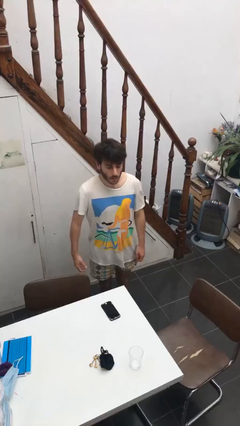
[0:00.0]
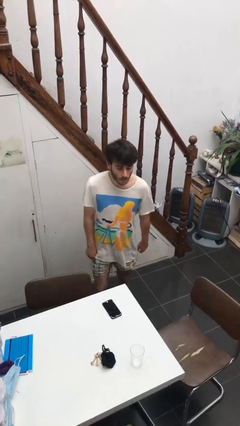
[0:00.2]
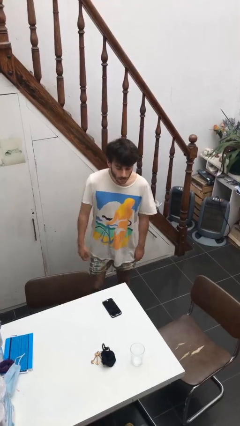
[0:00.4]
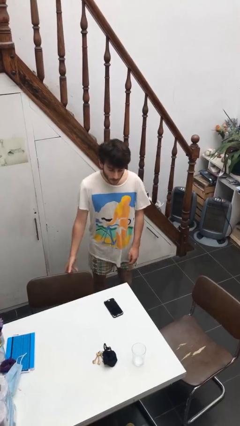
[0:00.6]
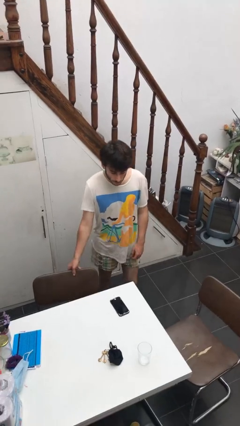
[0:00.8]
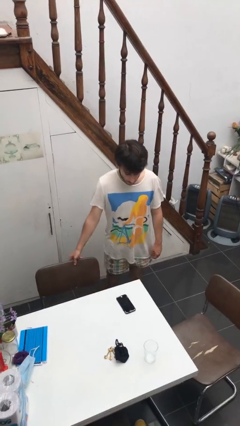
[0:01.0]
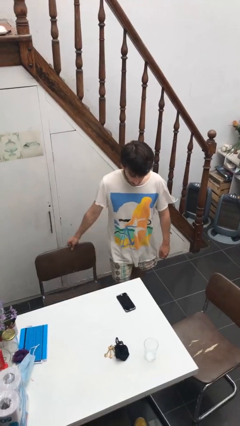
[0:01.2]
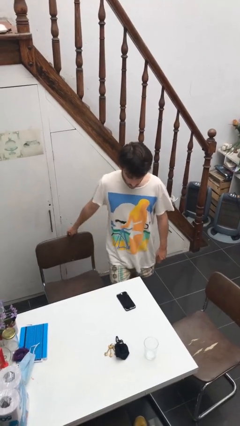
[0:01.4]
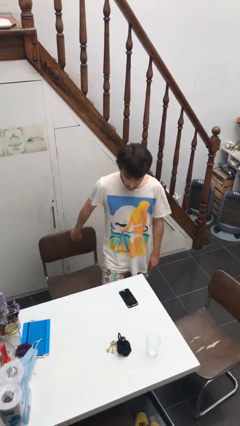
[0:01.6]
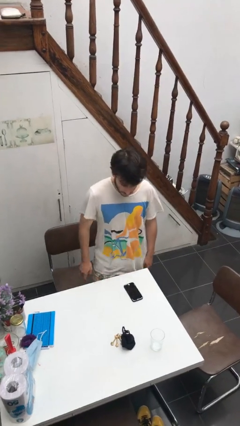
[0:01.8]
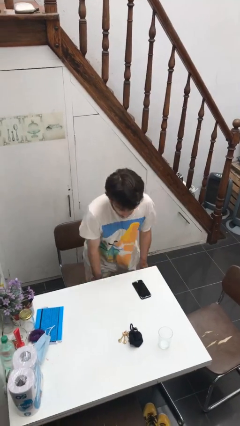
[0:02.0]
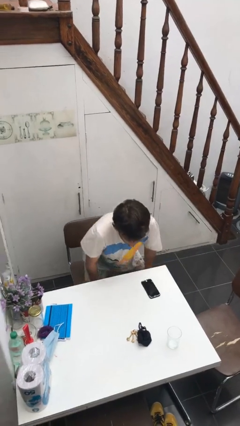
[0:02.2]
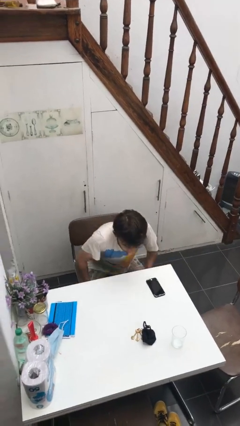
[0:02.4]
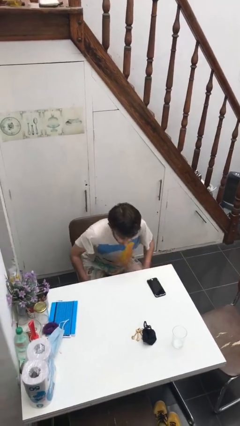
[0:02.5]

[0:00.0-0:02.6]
person sits down

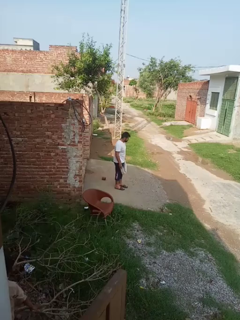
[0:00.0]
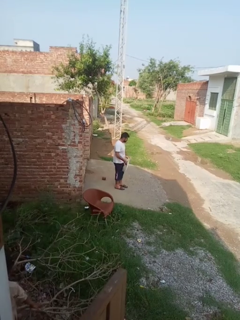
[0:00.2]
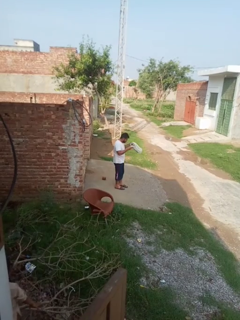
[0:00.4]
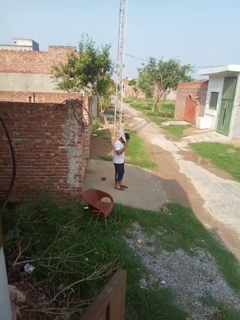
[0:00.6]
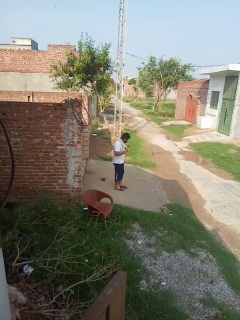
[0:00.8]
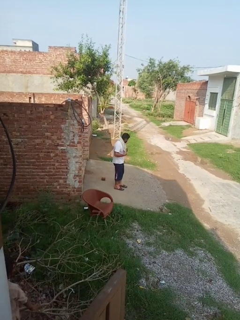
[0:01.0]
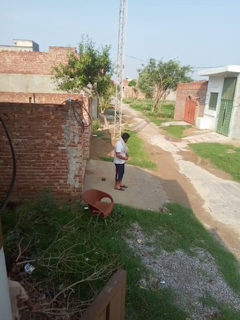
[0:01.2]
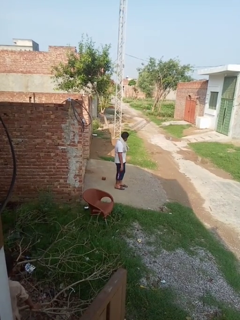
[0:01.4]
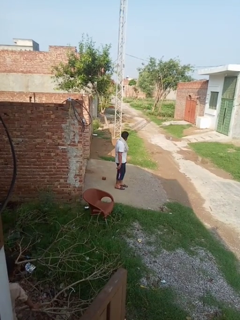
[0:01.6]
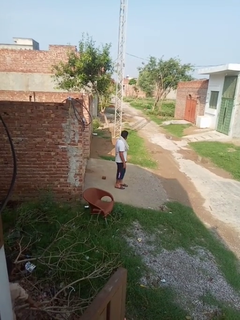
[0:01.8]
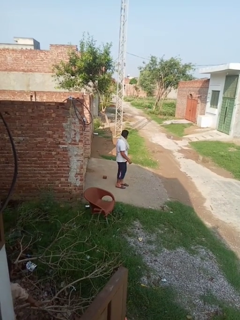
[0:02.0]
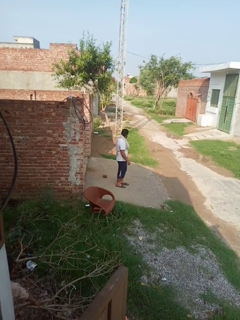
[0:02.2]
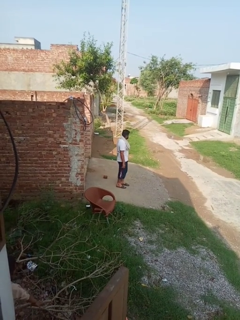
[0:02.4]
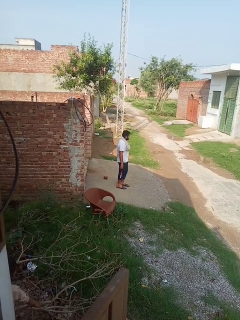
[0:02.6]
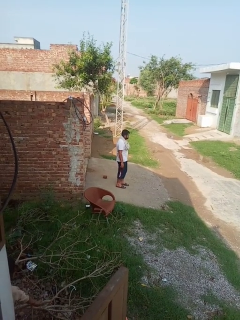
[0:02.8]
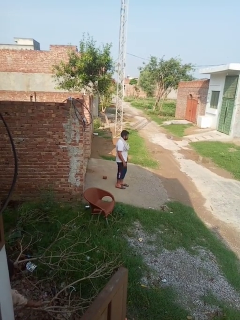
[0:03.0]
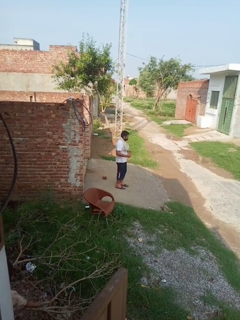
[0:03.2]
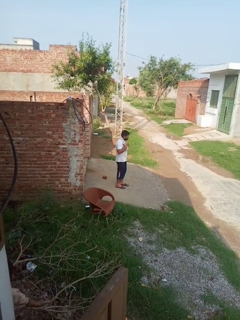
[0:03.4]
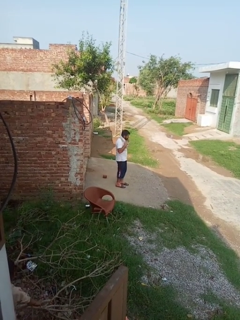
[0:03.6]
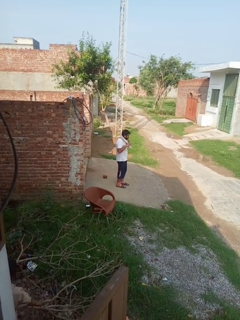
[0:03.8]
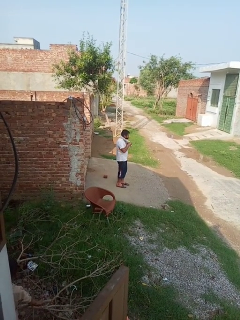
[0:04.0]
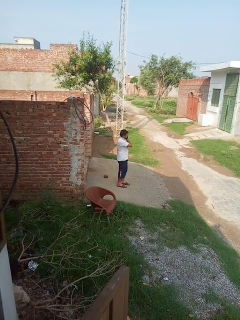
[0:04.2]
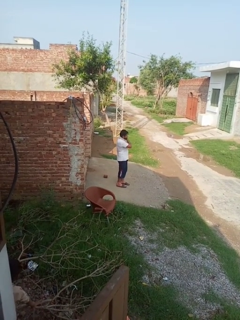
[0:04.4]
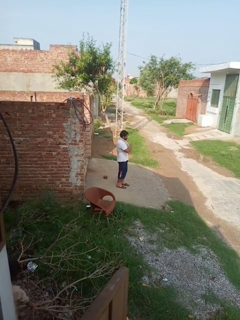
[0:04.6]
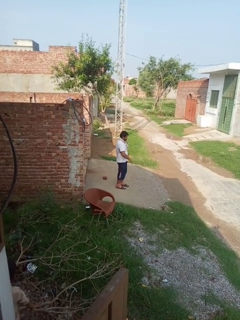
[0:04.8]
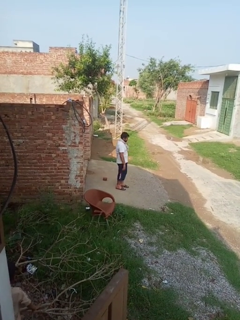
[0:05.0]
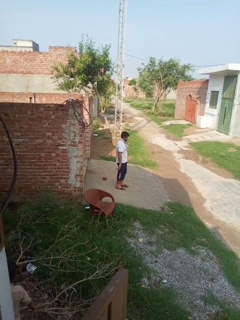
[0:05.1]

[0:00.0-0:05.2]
person puts on scarf

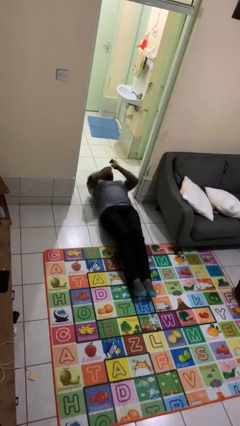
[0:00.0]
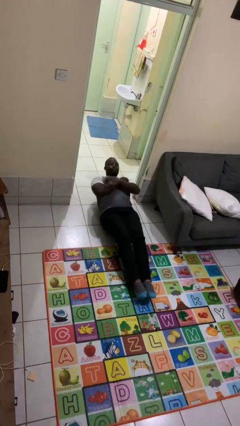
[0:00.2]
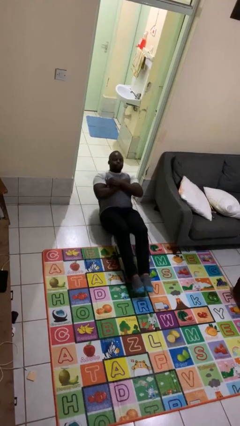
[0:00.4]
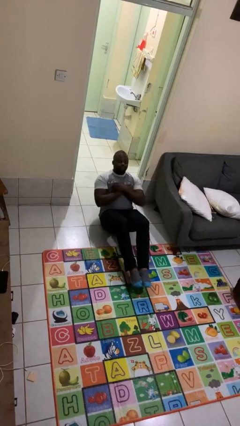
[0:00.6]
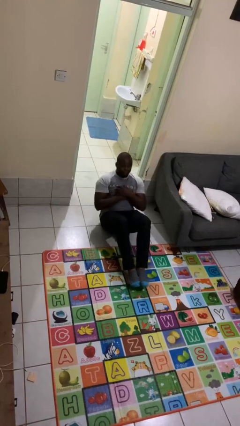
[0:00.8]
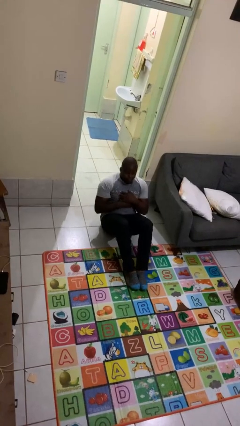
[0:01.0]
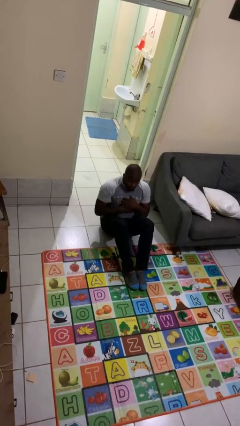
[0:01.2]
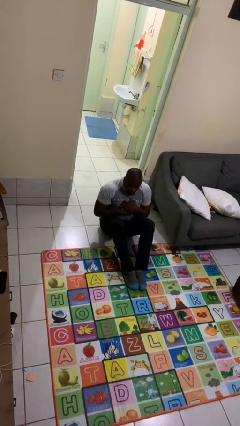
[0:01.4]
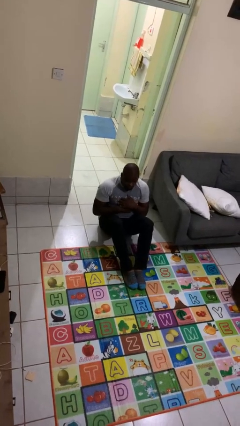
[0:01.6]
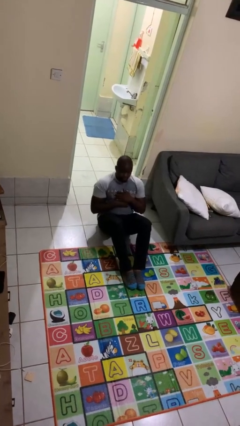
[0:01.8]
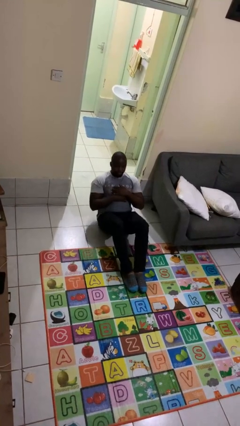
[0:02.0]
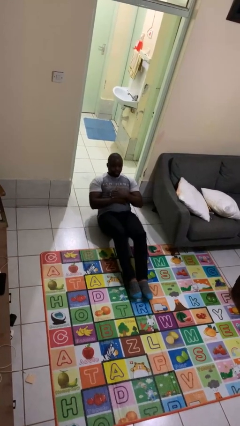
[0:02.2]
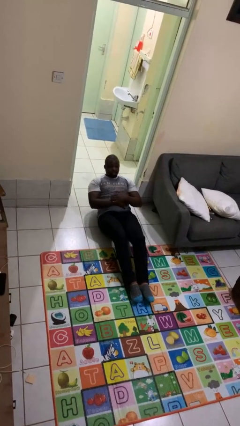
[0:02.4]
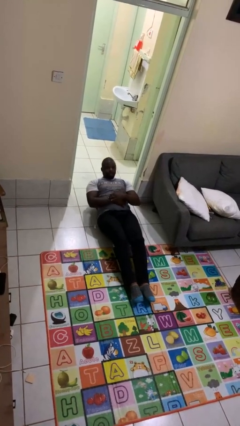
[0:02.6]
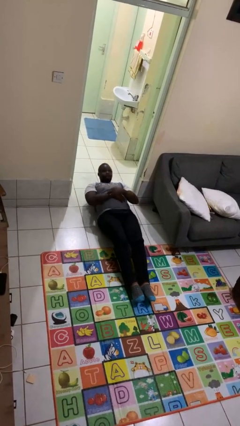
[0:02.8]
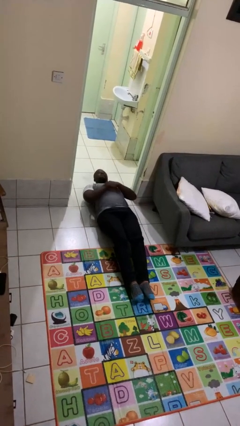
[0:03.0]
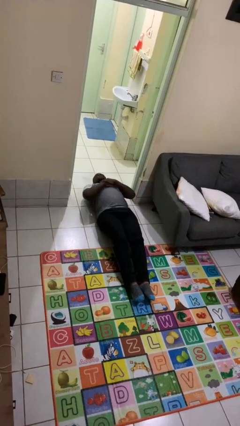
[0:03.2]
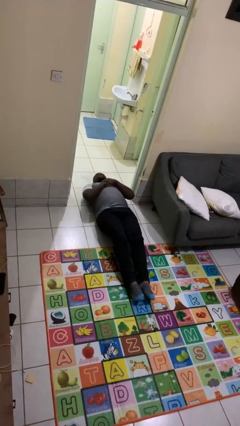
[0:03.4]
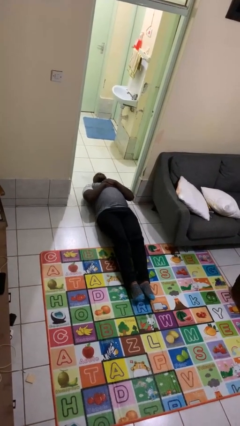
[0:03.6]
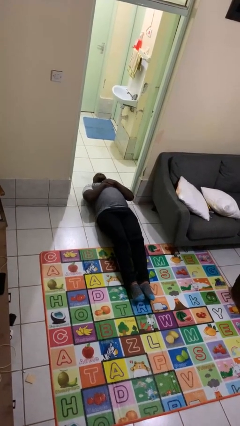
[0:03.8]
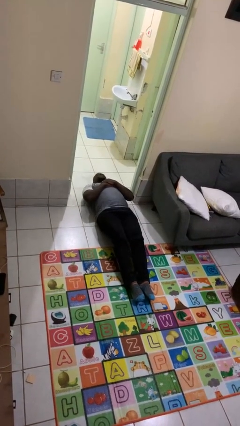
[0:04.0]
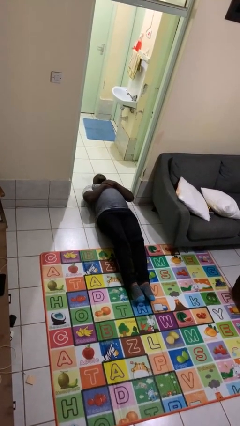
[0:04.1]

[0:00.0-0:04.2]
person exercises with situp

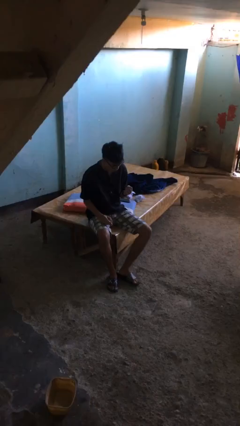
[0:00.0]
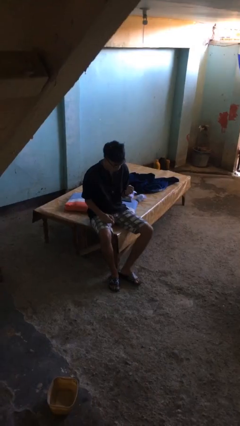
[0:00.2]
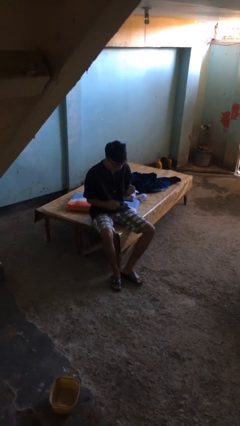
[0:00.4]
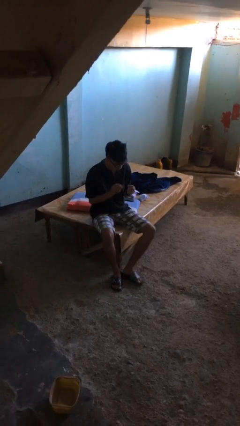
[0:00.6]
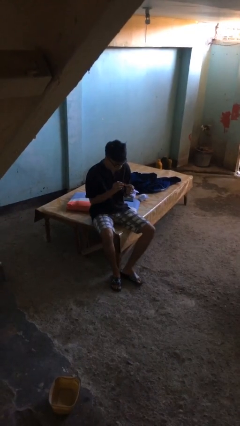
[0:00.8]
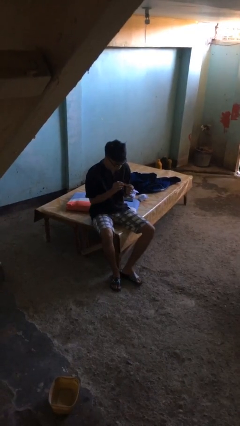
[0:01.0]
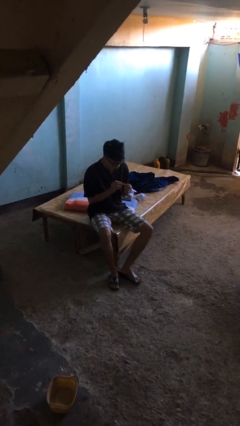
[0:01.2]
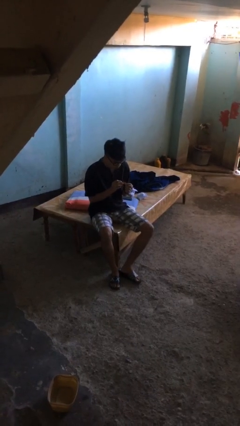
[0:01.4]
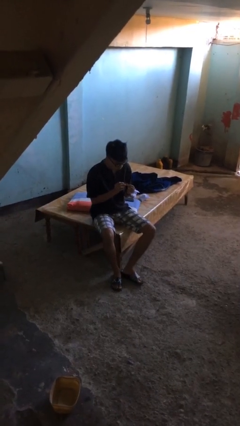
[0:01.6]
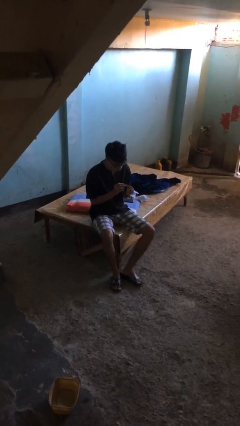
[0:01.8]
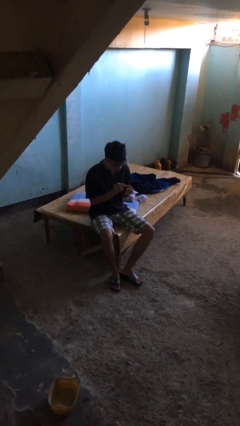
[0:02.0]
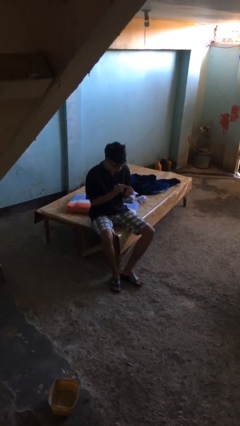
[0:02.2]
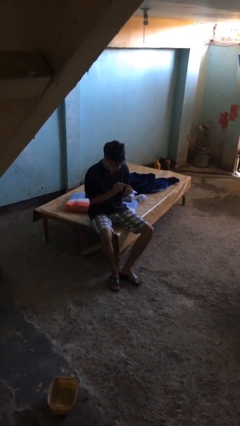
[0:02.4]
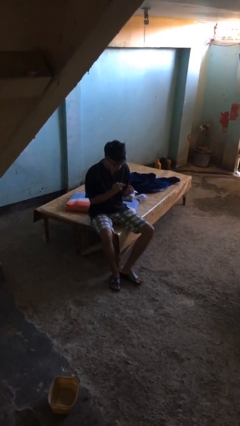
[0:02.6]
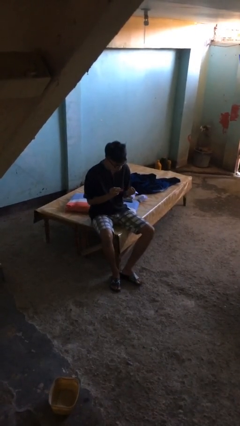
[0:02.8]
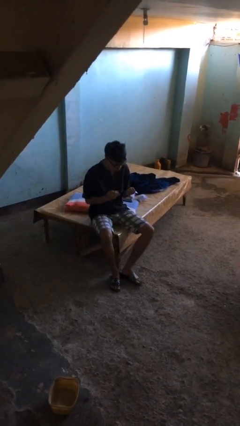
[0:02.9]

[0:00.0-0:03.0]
person clips fingernails

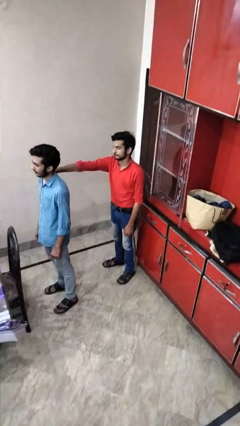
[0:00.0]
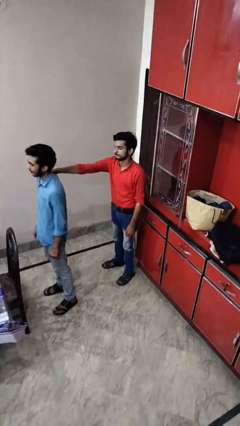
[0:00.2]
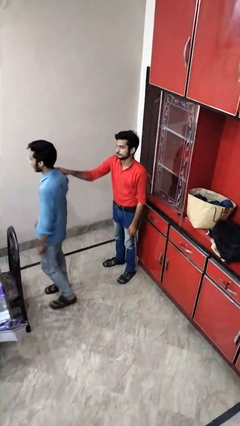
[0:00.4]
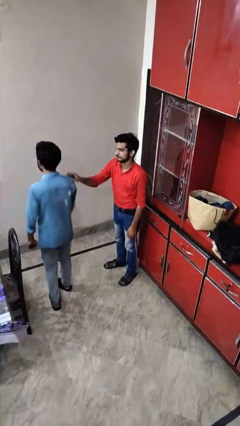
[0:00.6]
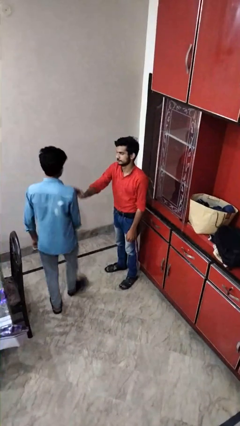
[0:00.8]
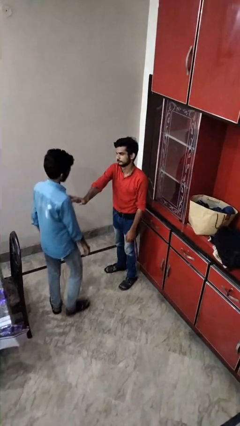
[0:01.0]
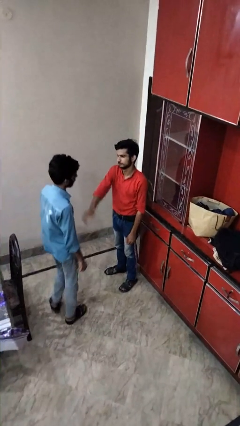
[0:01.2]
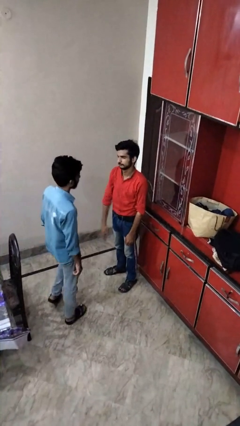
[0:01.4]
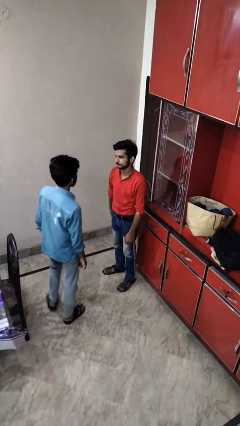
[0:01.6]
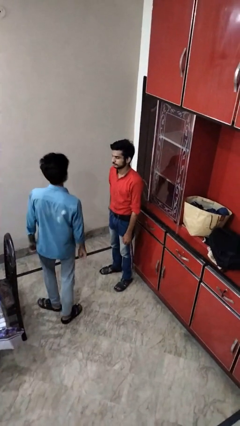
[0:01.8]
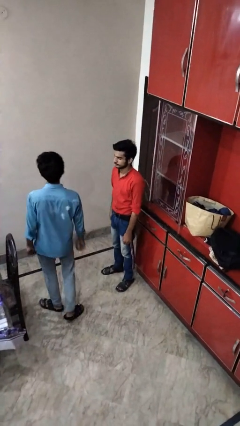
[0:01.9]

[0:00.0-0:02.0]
person spins person around

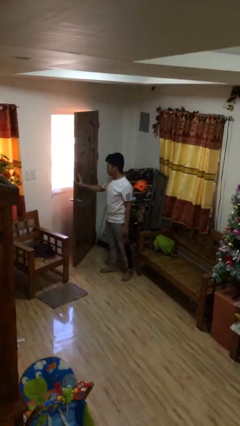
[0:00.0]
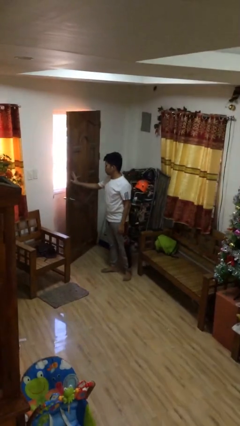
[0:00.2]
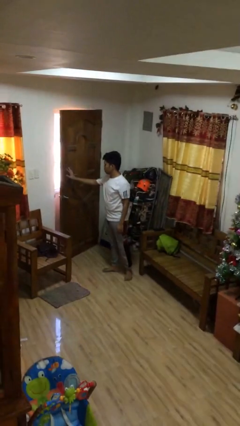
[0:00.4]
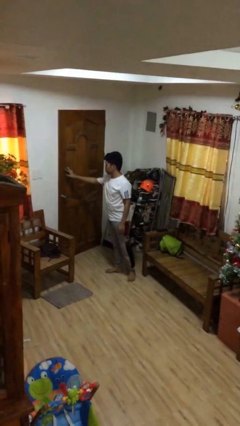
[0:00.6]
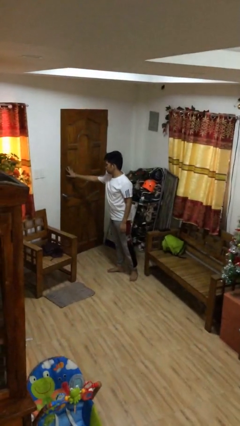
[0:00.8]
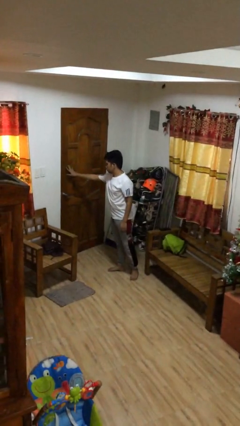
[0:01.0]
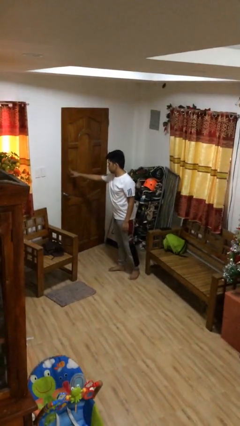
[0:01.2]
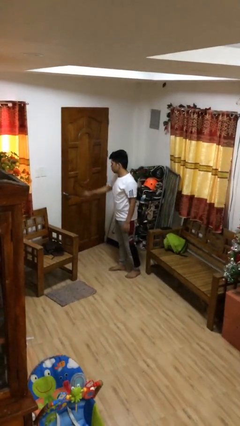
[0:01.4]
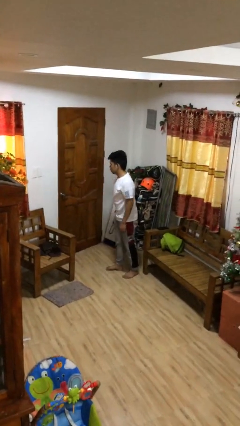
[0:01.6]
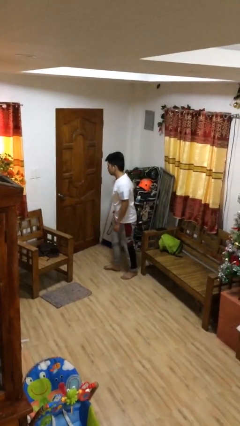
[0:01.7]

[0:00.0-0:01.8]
person closes facility door
